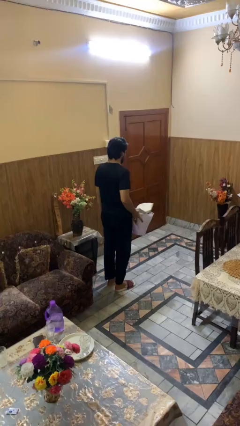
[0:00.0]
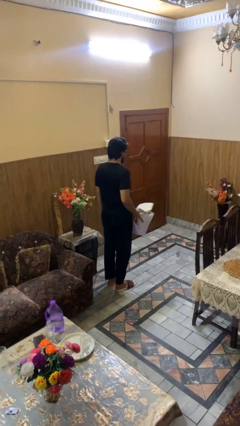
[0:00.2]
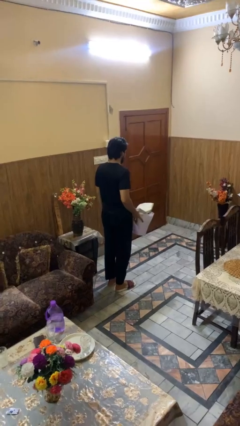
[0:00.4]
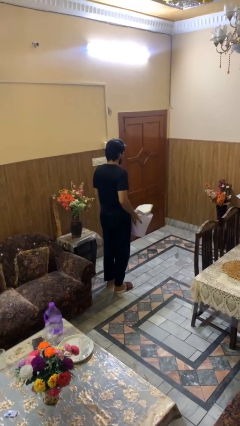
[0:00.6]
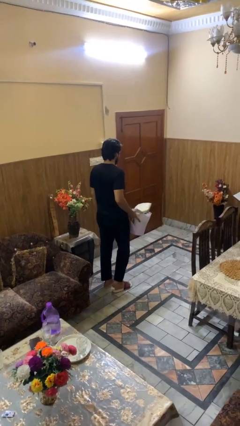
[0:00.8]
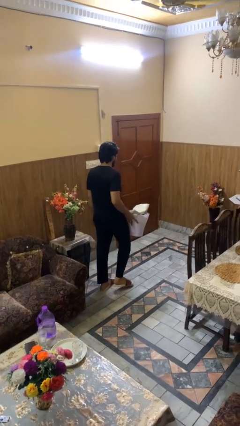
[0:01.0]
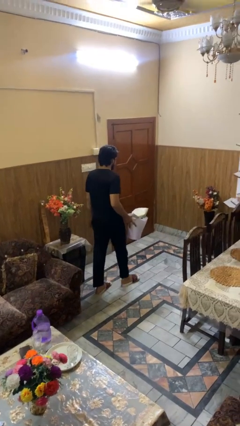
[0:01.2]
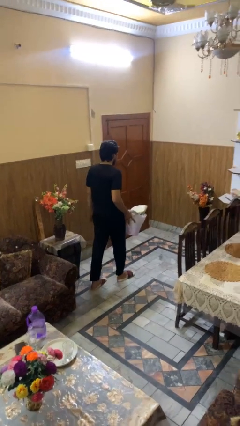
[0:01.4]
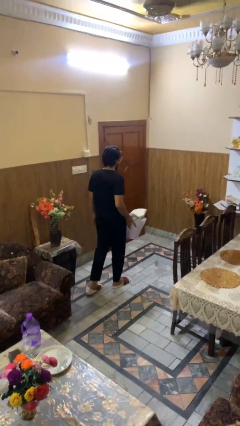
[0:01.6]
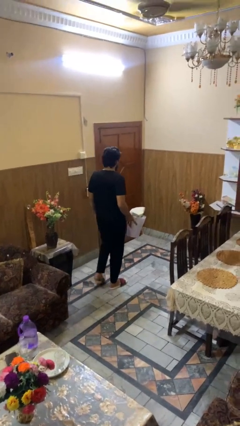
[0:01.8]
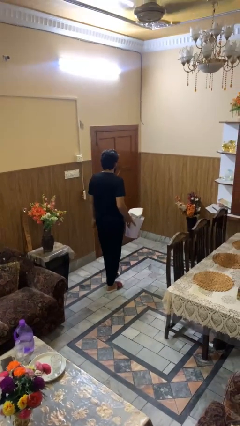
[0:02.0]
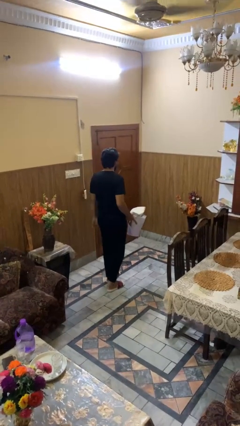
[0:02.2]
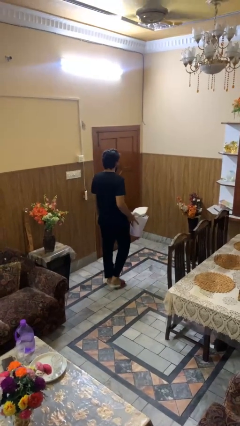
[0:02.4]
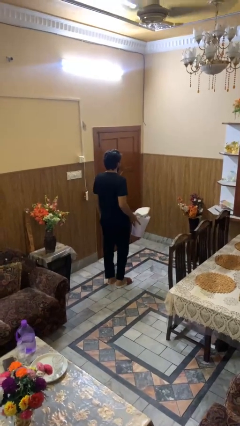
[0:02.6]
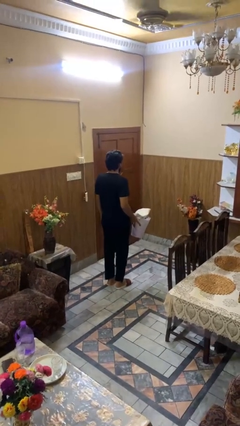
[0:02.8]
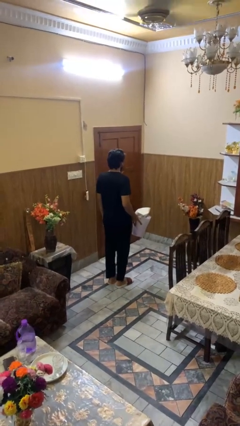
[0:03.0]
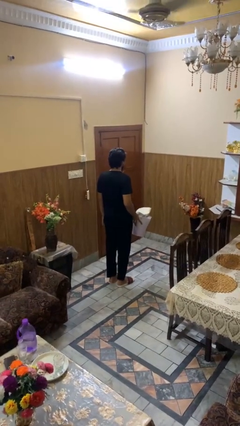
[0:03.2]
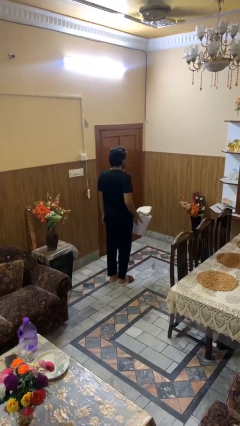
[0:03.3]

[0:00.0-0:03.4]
person carries laundry basket

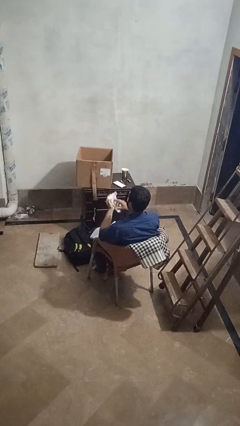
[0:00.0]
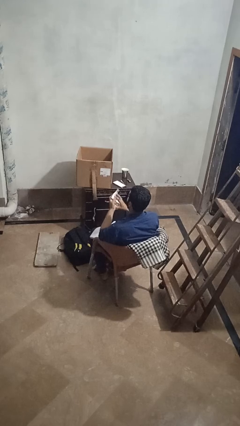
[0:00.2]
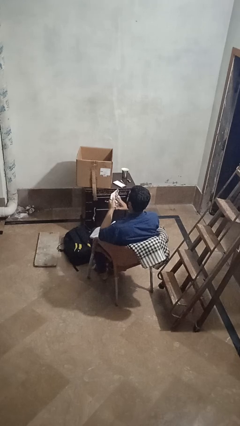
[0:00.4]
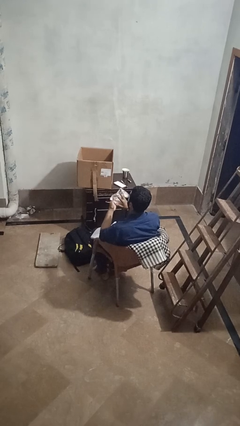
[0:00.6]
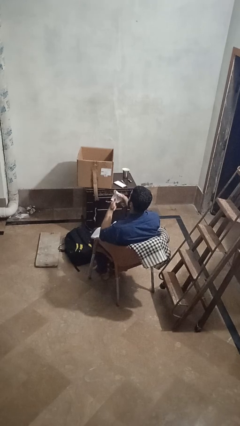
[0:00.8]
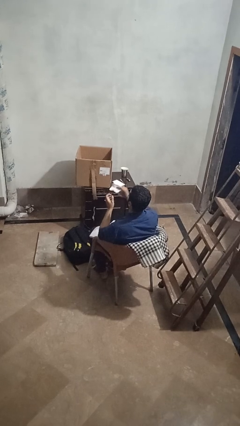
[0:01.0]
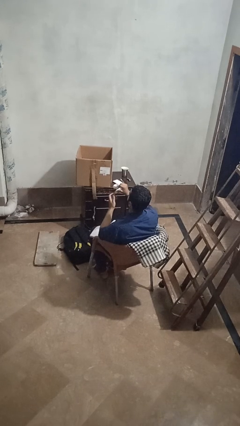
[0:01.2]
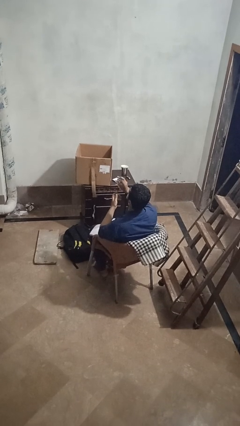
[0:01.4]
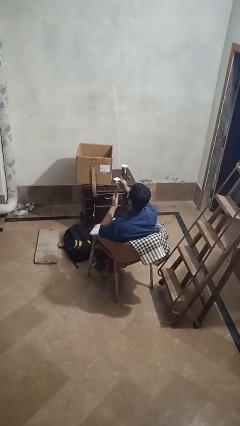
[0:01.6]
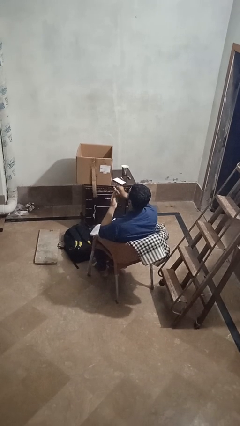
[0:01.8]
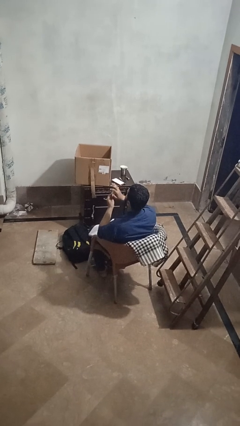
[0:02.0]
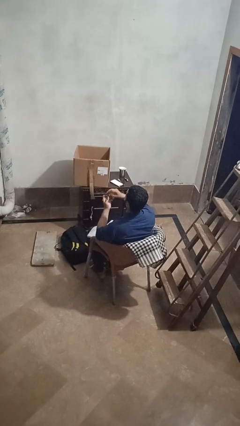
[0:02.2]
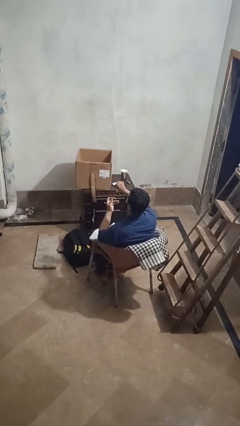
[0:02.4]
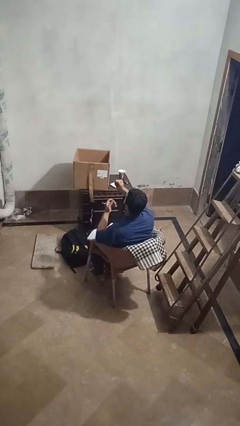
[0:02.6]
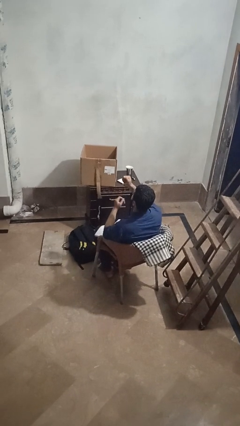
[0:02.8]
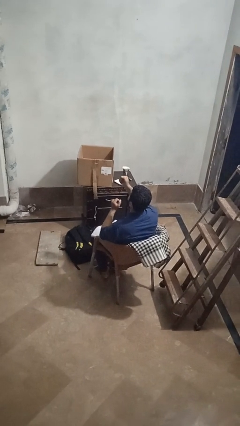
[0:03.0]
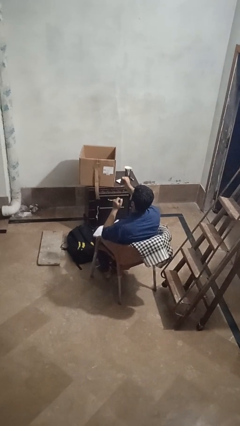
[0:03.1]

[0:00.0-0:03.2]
person crumples paper

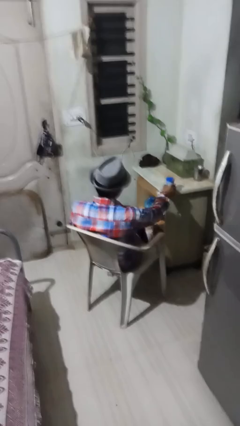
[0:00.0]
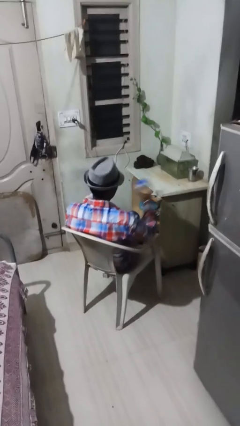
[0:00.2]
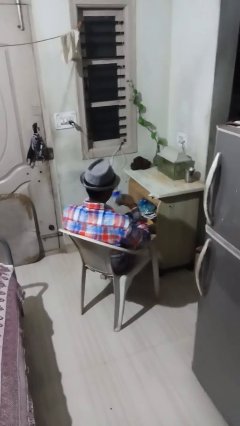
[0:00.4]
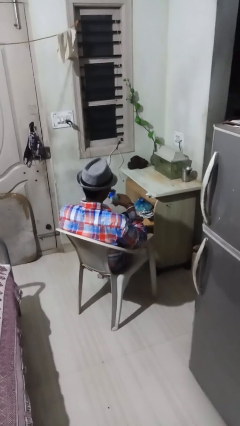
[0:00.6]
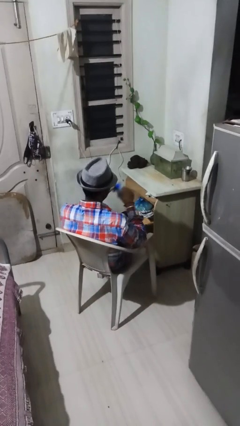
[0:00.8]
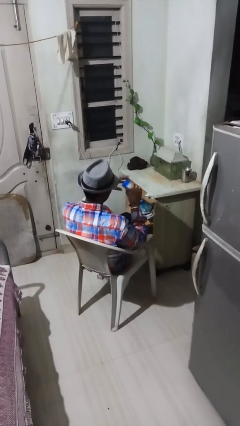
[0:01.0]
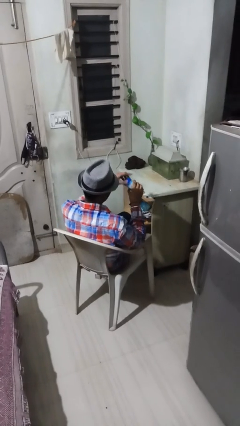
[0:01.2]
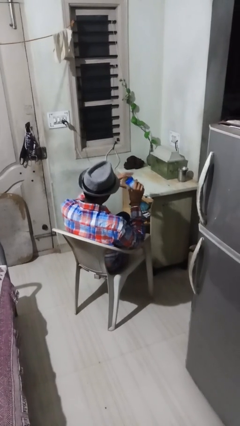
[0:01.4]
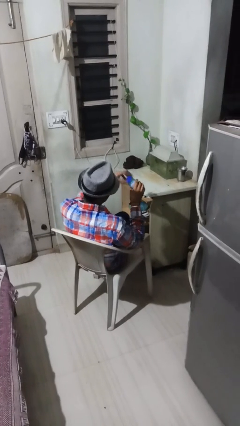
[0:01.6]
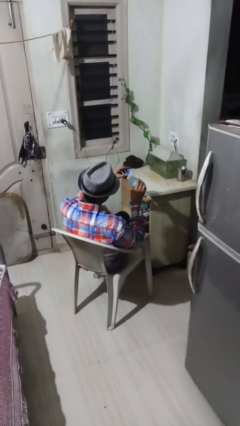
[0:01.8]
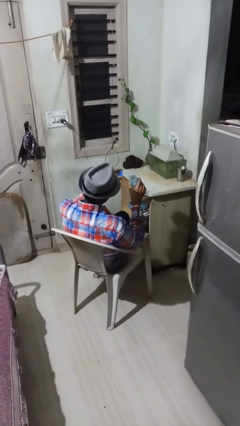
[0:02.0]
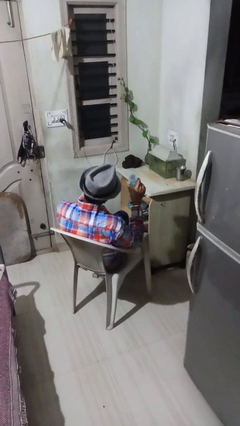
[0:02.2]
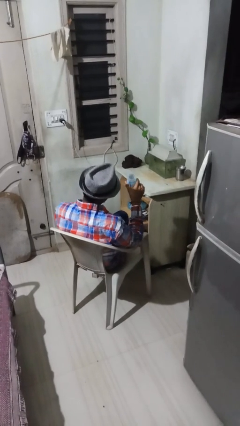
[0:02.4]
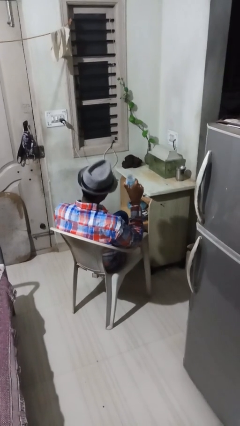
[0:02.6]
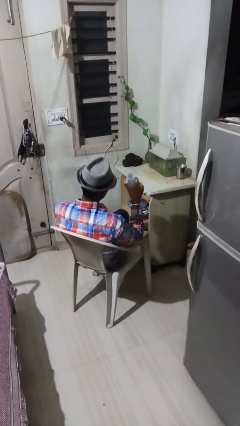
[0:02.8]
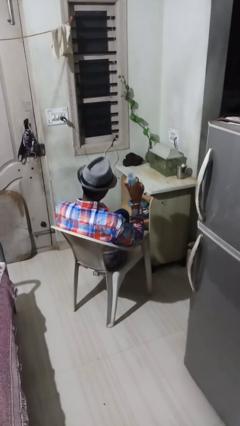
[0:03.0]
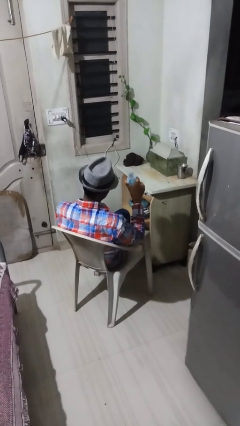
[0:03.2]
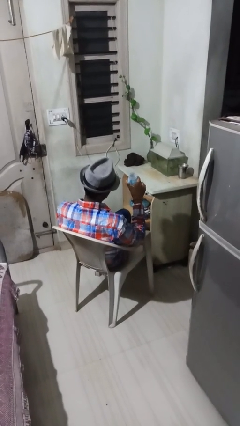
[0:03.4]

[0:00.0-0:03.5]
person opens jar

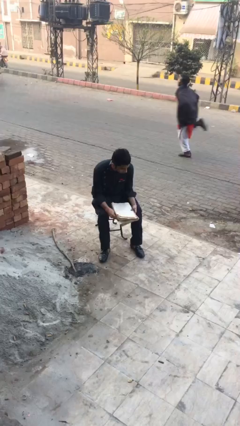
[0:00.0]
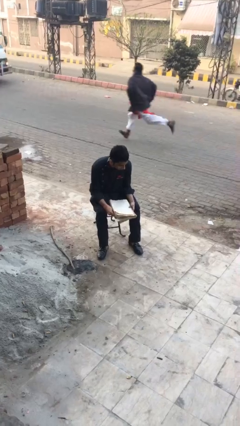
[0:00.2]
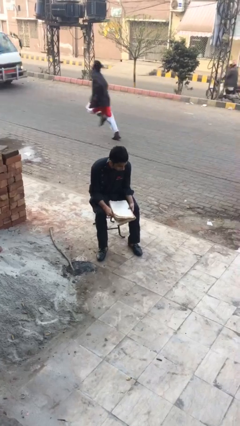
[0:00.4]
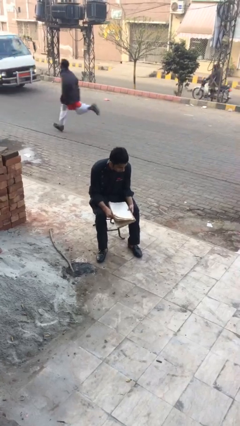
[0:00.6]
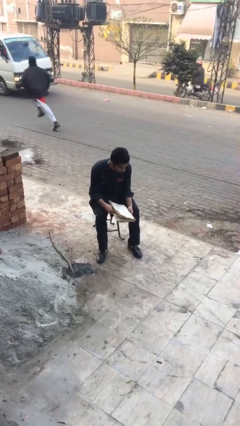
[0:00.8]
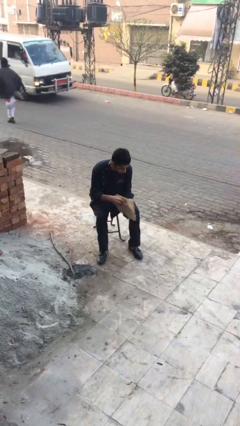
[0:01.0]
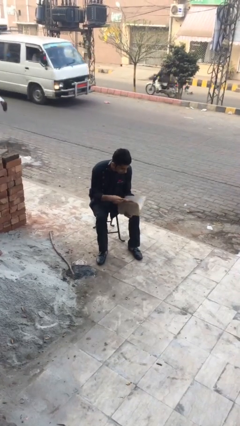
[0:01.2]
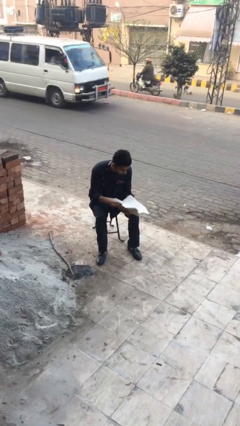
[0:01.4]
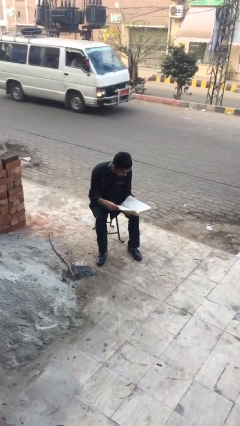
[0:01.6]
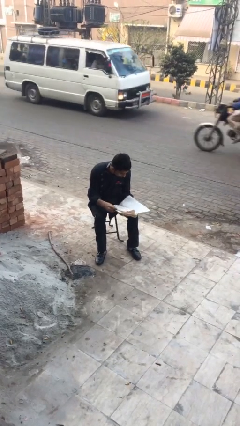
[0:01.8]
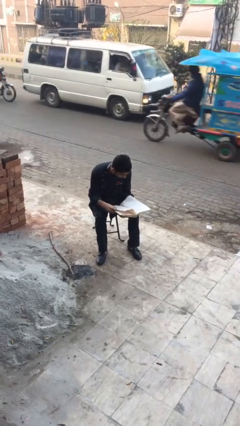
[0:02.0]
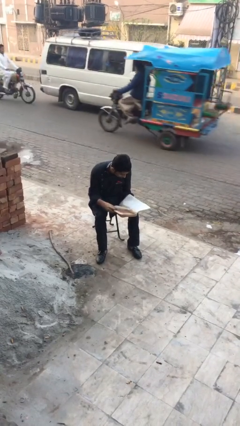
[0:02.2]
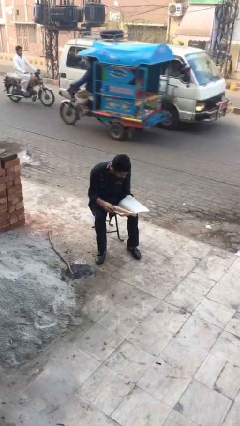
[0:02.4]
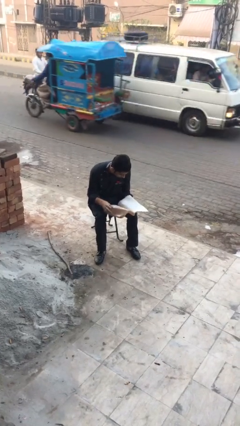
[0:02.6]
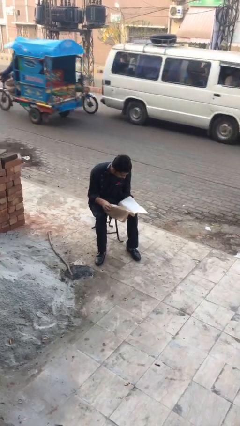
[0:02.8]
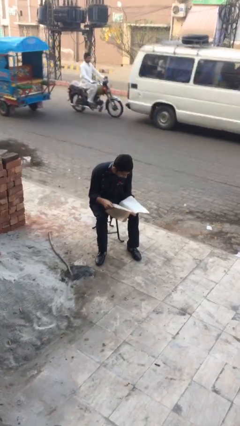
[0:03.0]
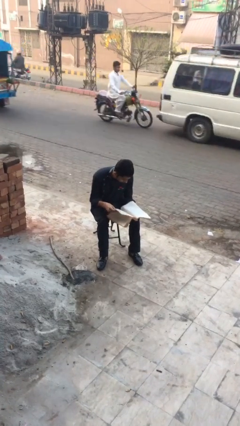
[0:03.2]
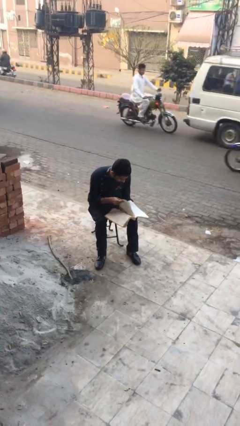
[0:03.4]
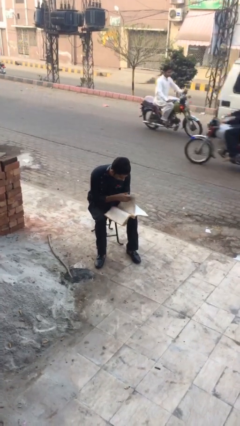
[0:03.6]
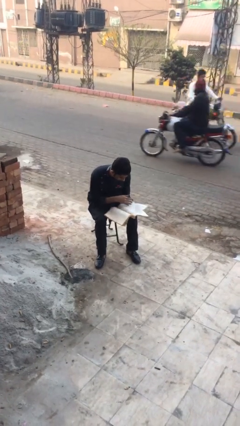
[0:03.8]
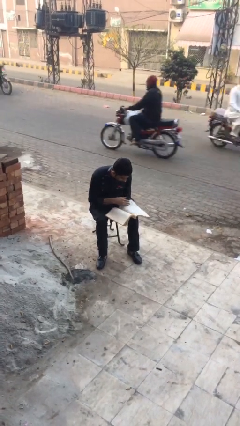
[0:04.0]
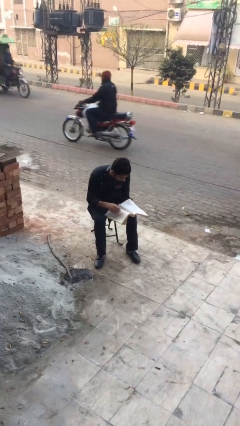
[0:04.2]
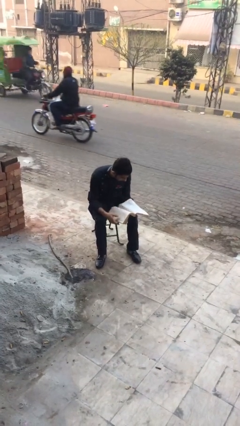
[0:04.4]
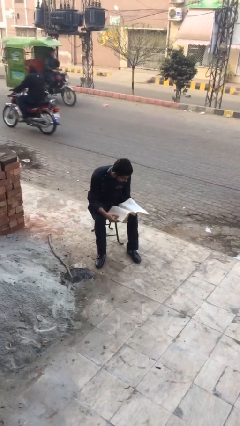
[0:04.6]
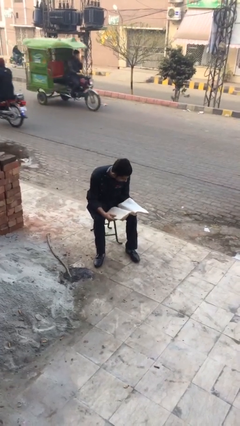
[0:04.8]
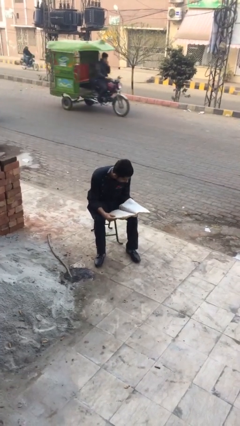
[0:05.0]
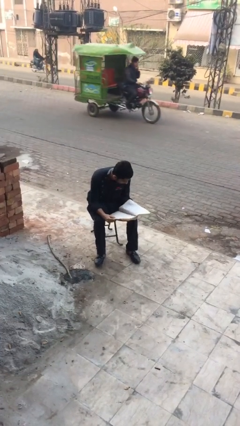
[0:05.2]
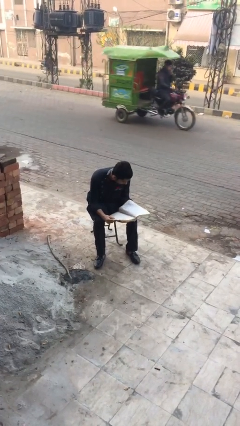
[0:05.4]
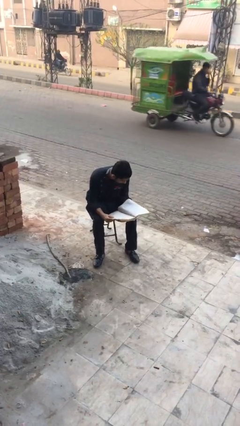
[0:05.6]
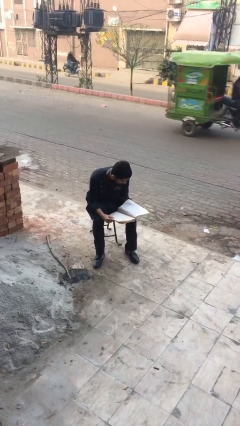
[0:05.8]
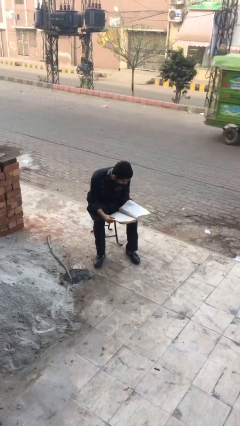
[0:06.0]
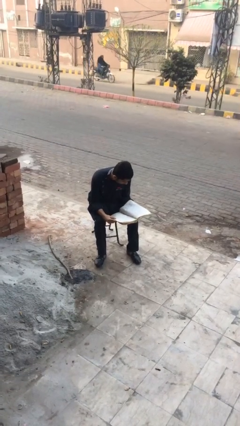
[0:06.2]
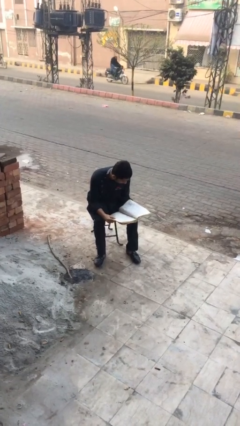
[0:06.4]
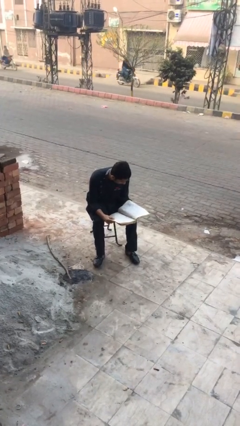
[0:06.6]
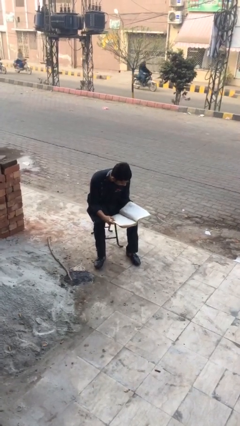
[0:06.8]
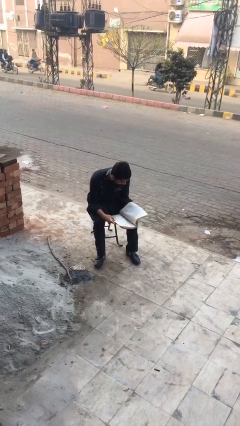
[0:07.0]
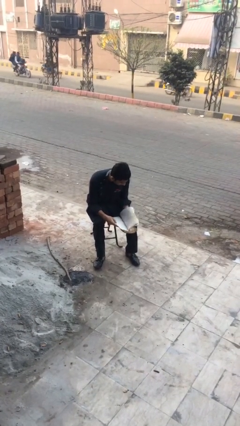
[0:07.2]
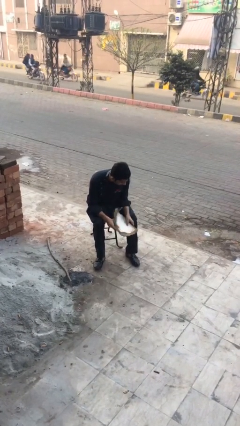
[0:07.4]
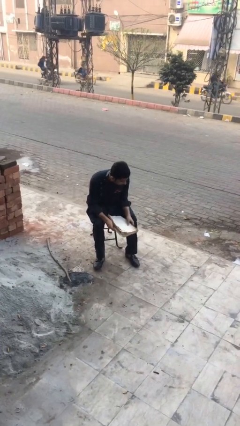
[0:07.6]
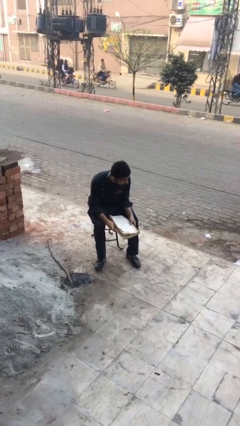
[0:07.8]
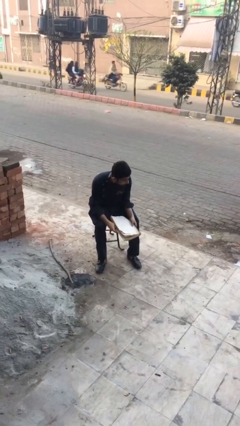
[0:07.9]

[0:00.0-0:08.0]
person reads document
